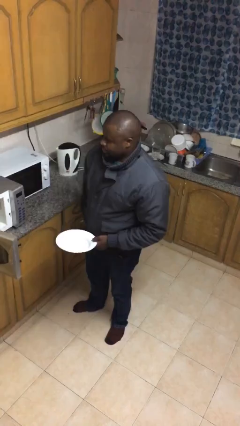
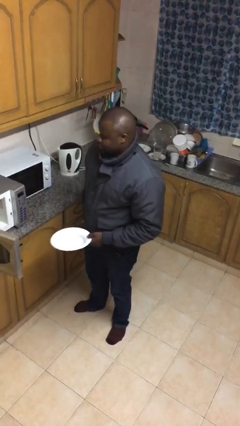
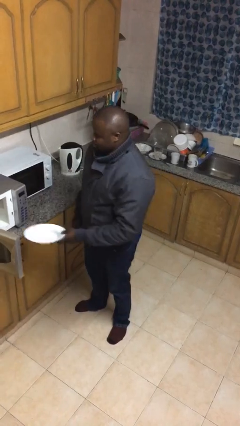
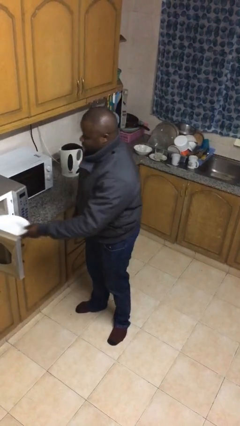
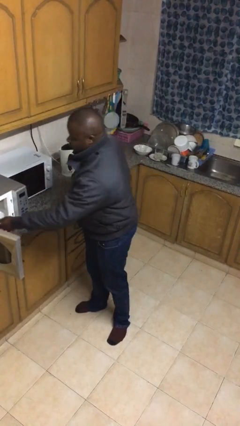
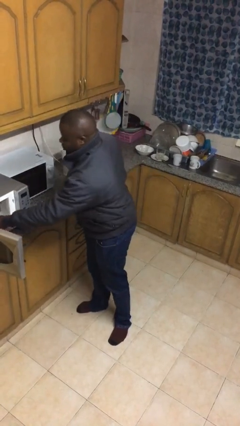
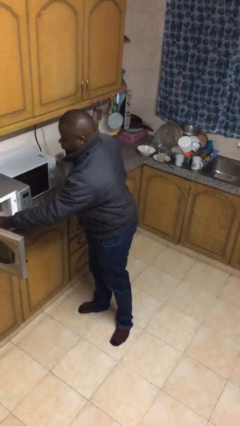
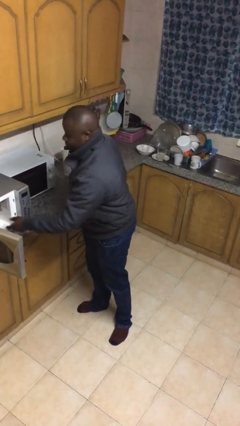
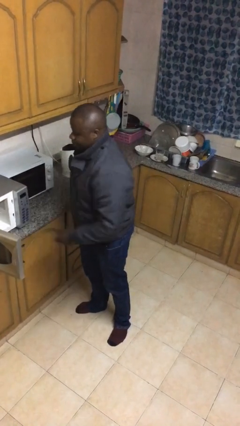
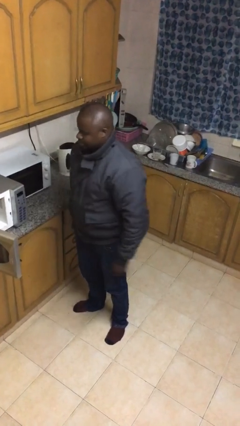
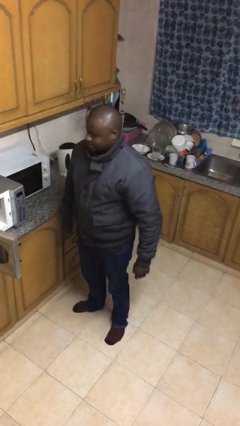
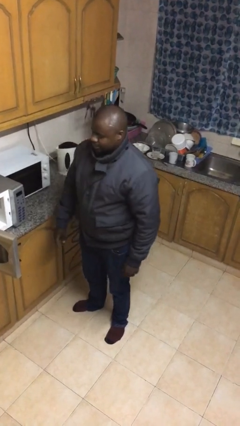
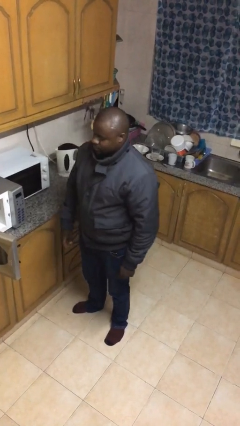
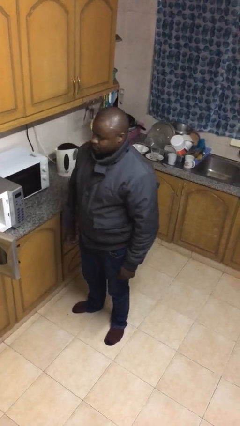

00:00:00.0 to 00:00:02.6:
person puts object into microwave

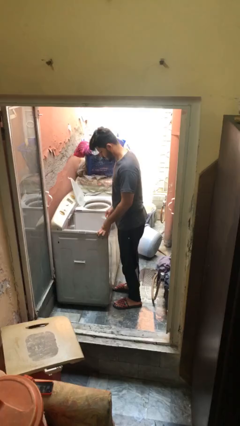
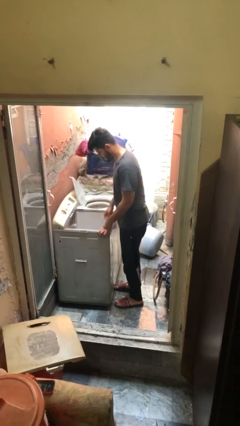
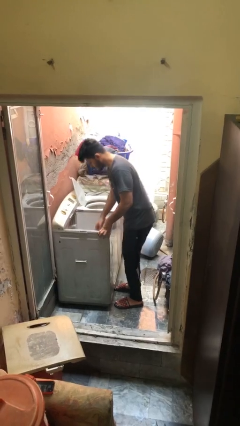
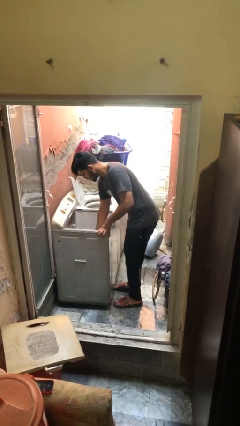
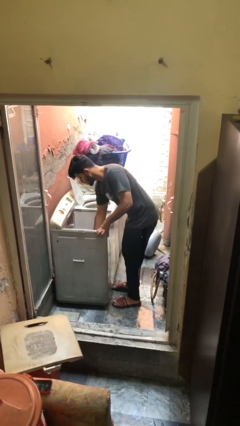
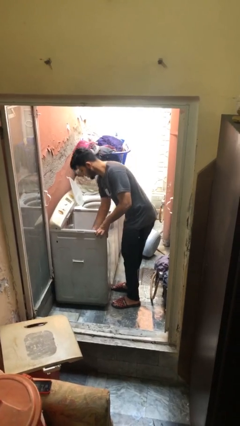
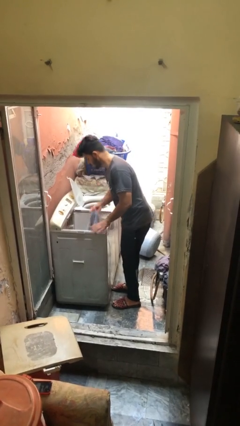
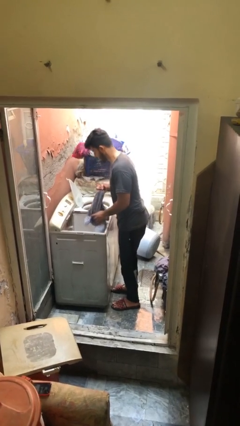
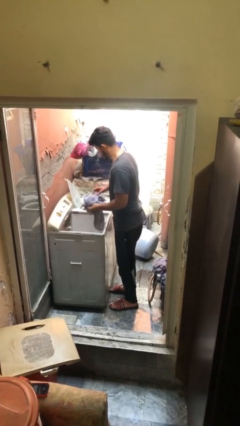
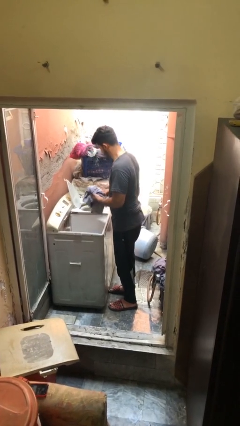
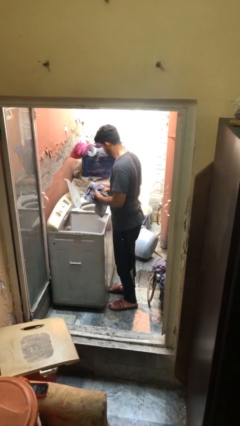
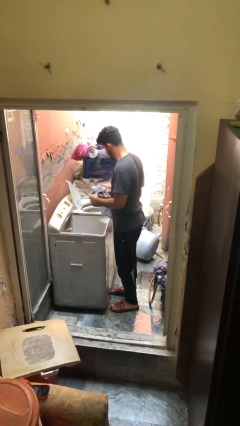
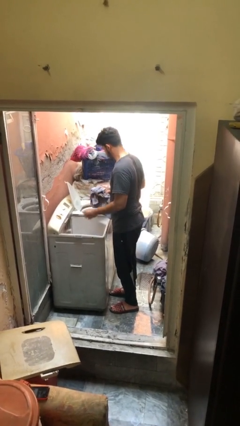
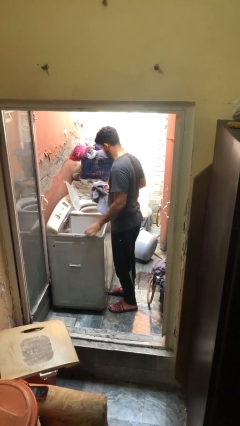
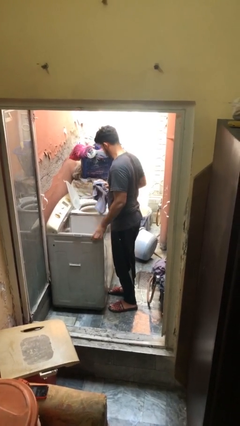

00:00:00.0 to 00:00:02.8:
person unloads clotheswasher

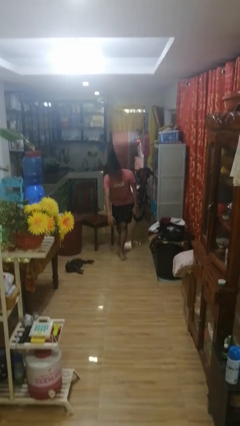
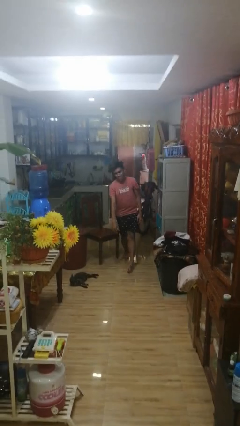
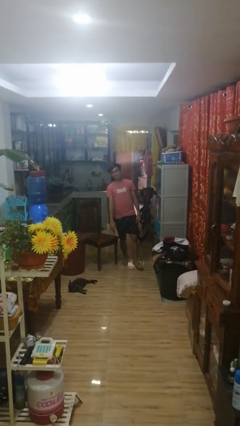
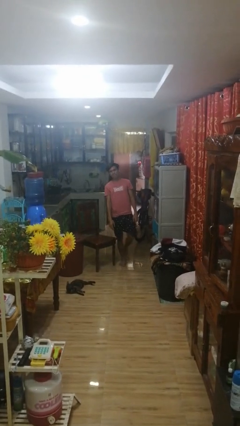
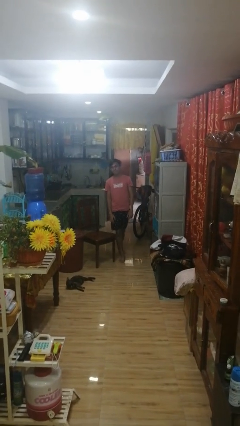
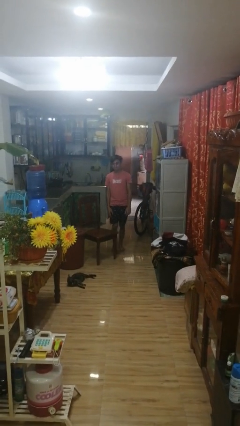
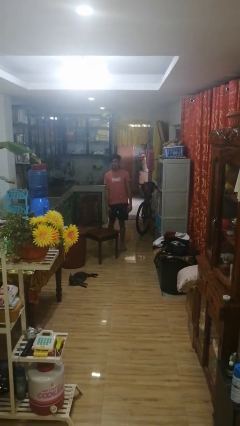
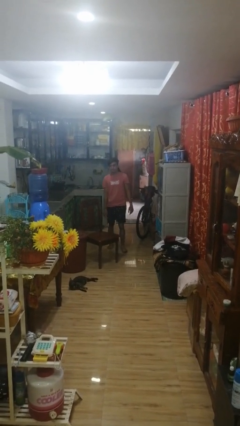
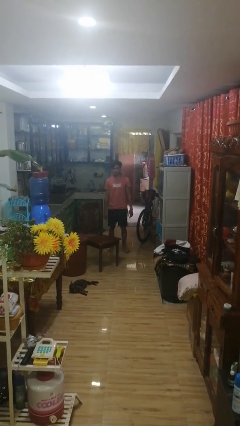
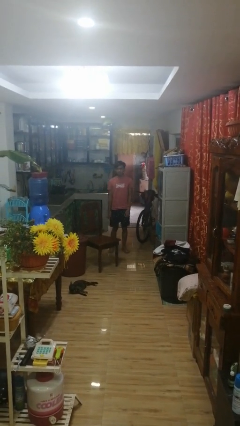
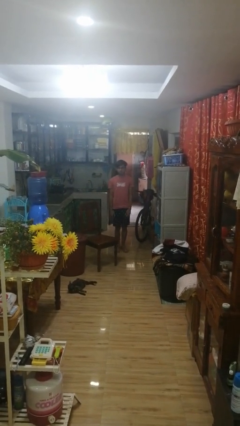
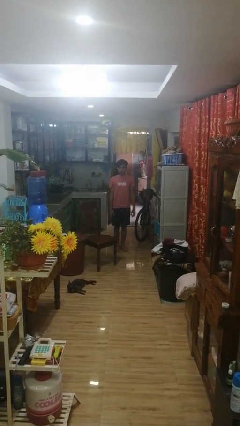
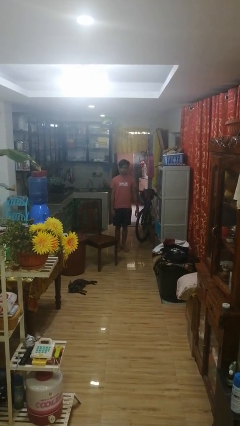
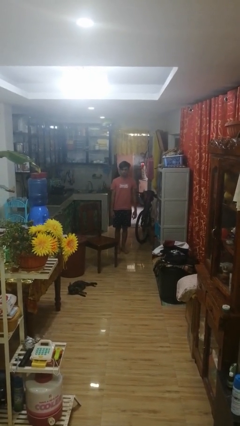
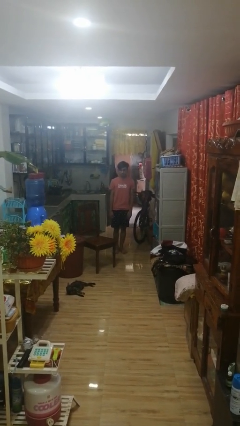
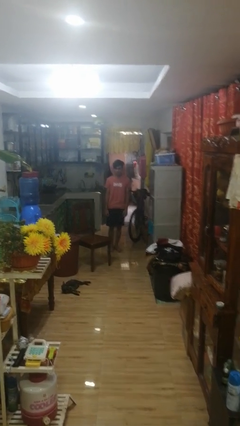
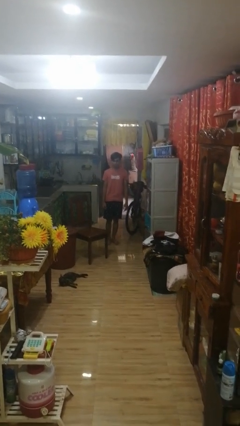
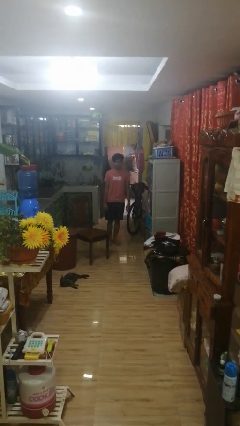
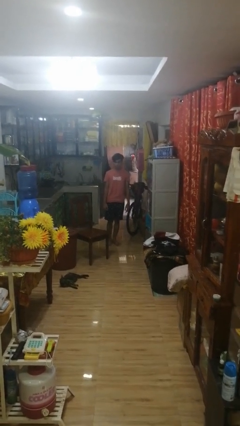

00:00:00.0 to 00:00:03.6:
person stands up from floor

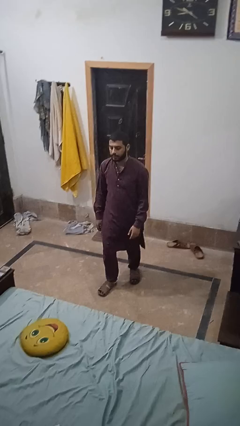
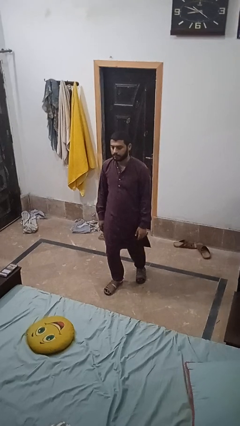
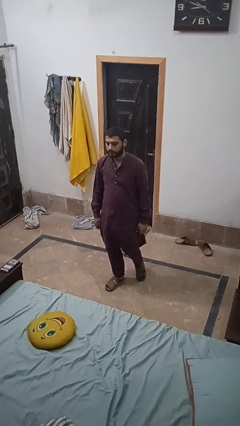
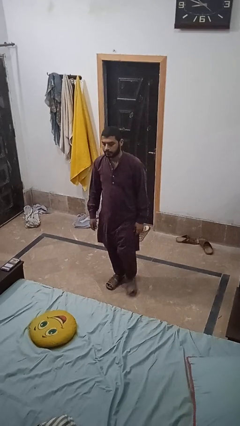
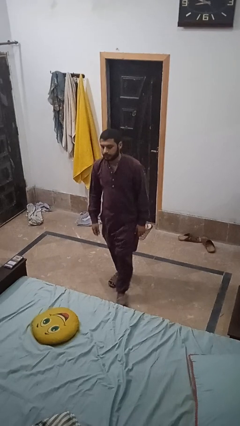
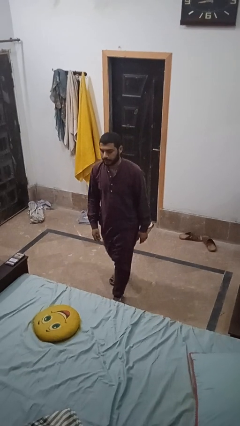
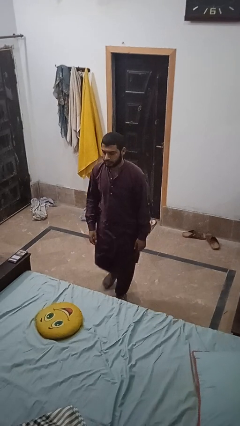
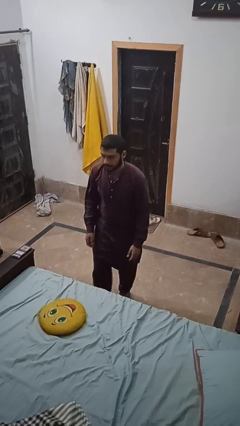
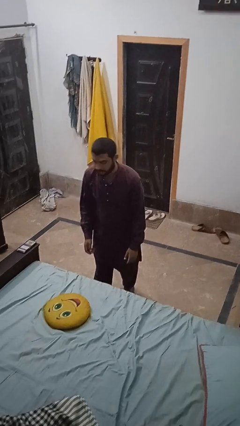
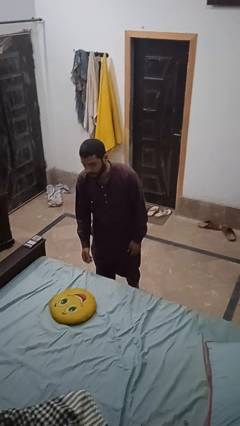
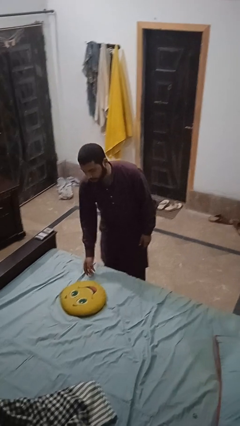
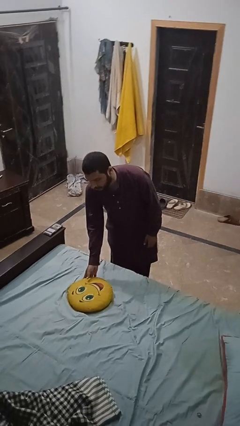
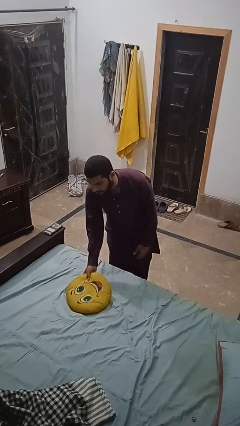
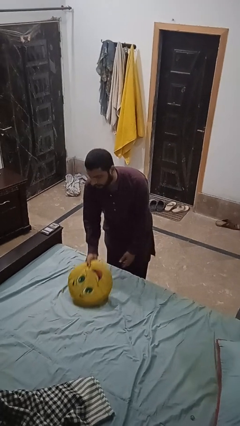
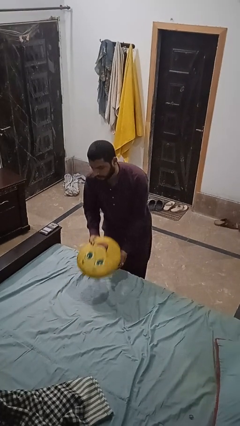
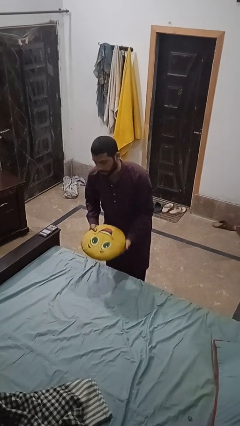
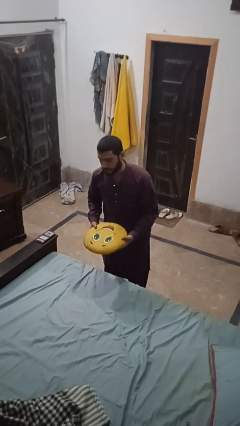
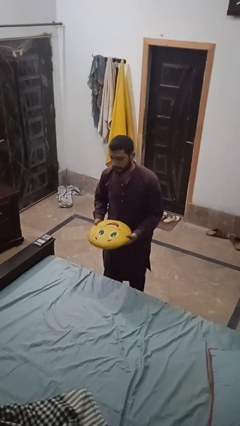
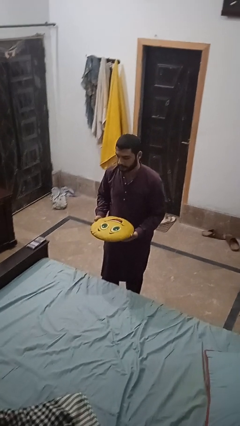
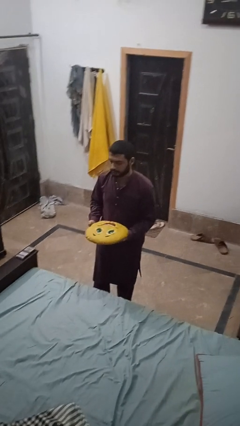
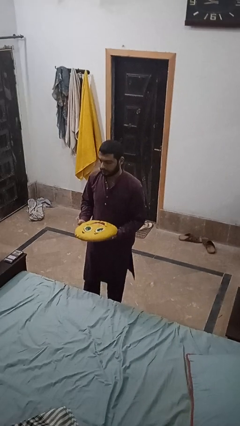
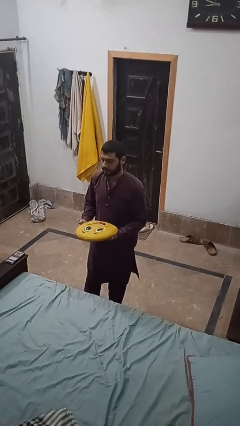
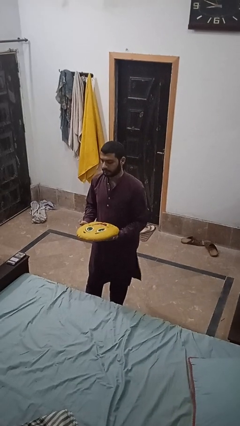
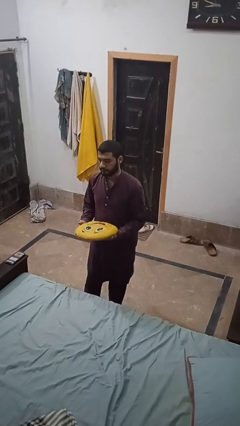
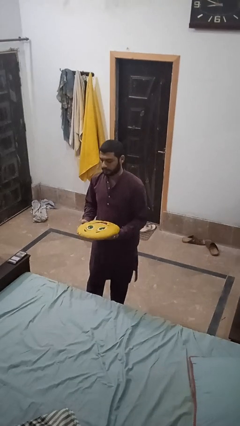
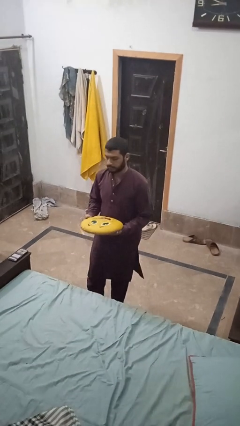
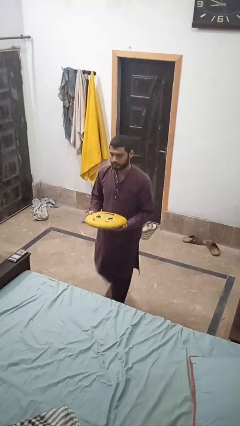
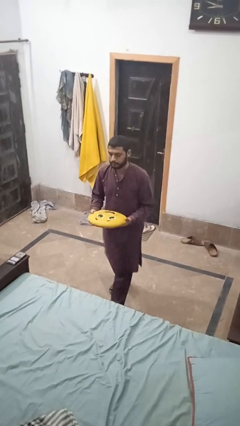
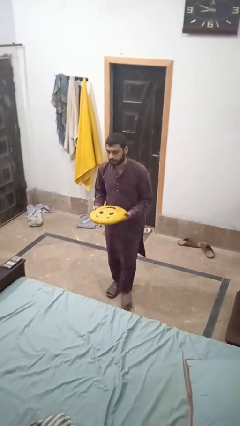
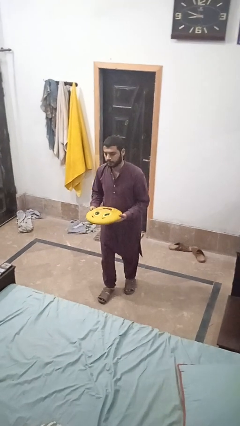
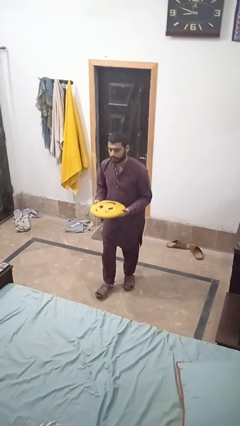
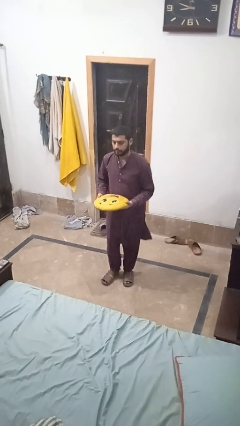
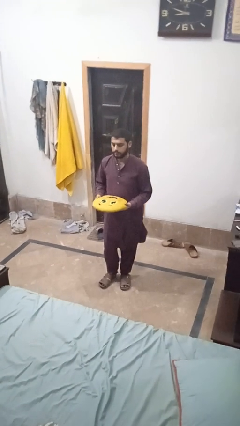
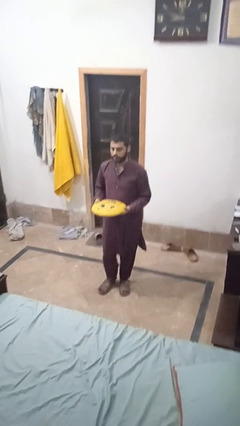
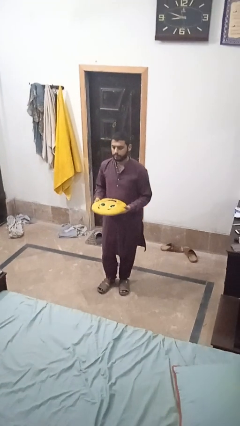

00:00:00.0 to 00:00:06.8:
person picks up object from bed

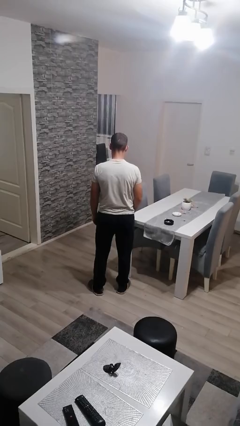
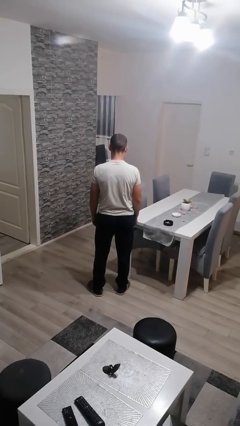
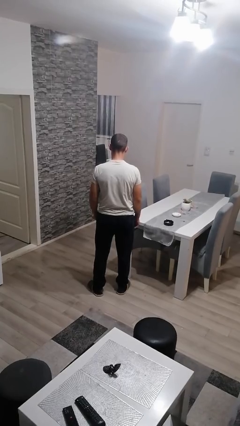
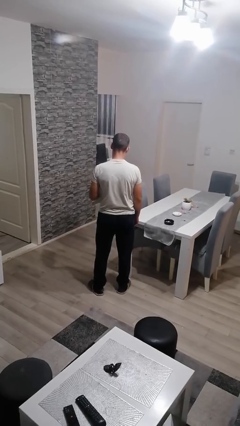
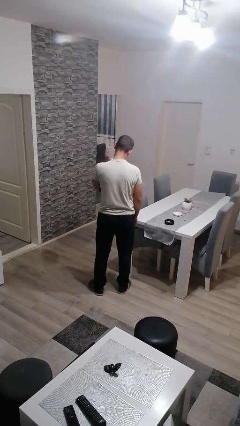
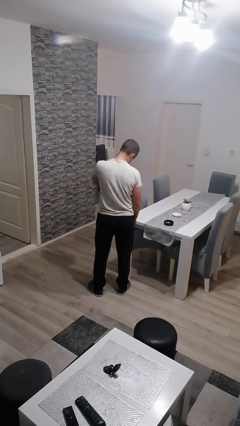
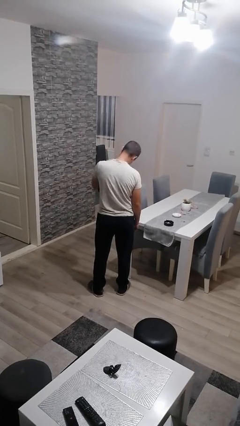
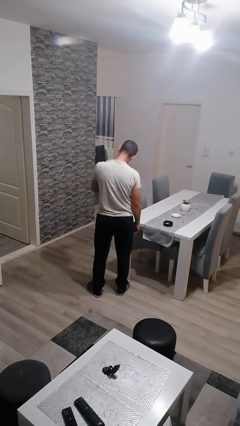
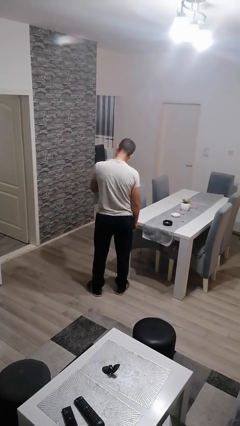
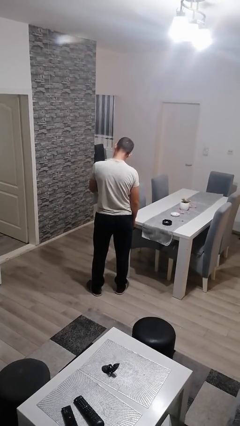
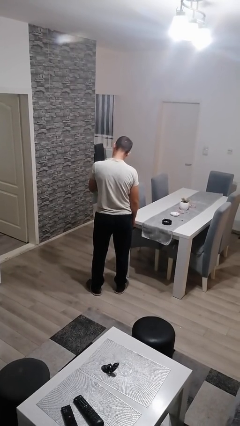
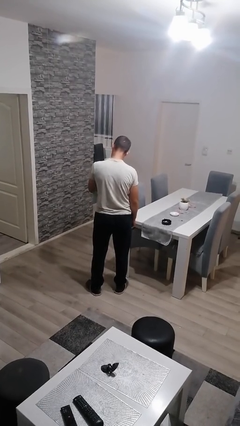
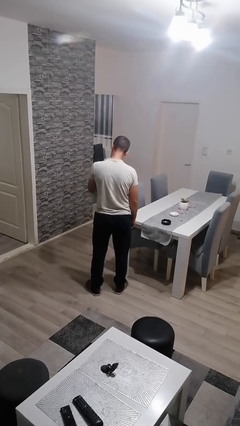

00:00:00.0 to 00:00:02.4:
person swats bug
